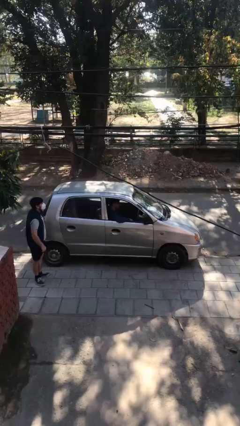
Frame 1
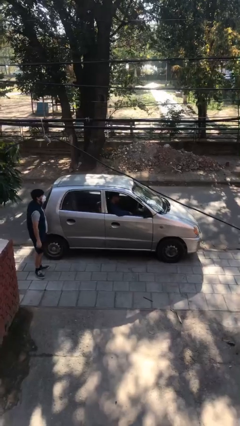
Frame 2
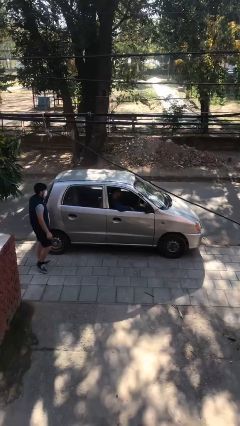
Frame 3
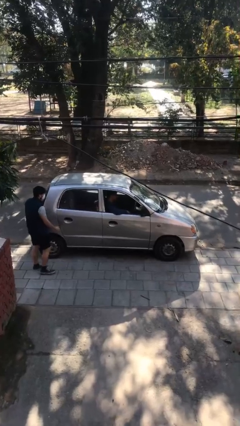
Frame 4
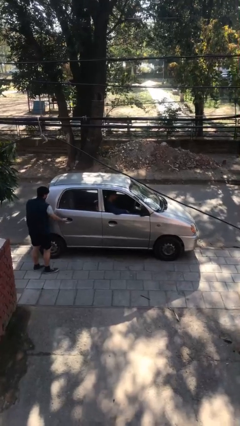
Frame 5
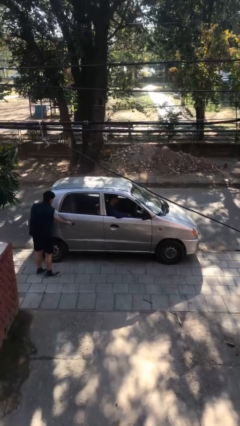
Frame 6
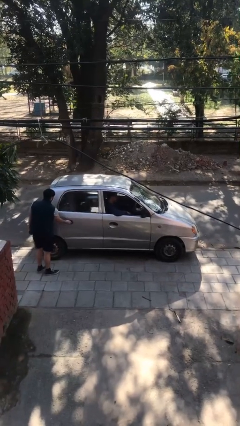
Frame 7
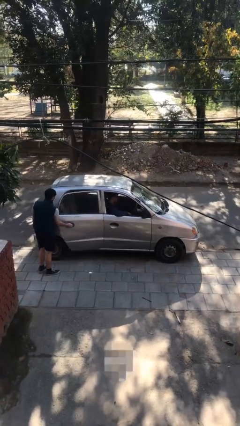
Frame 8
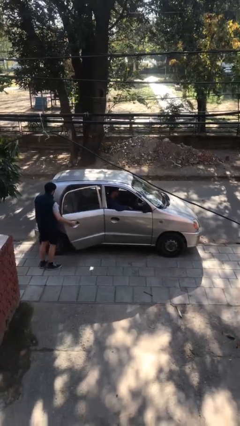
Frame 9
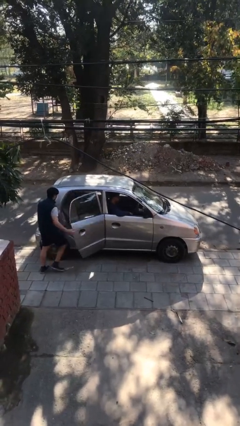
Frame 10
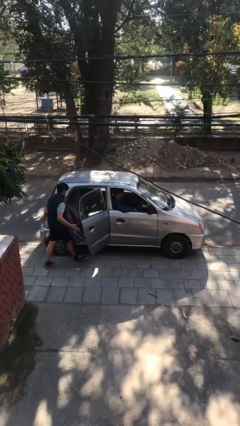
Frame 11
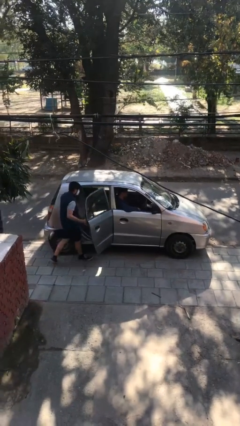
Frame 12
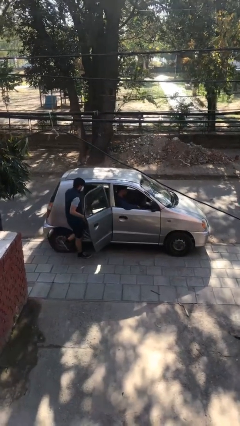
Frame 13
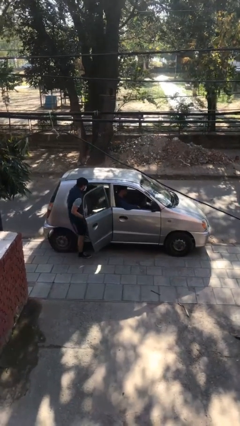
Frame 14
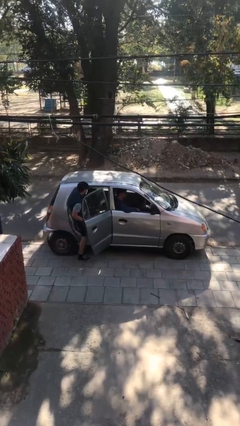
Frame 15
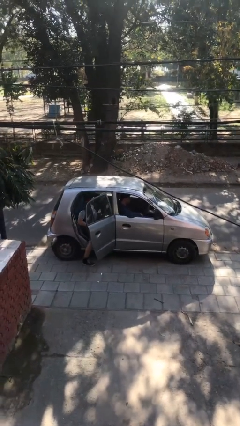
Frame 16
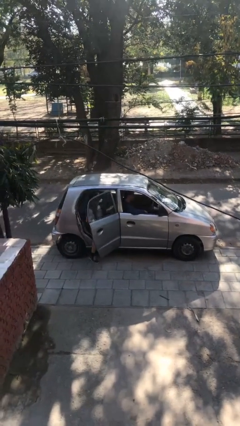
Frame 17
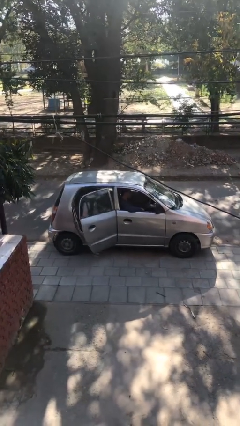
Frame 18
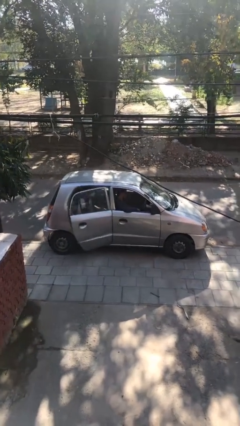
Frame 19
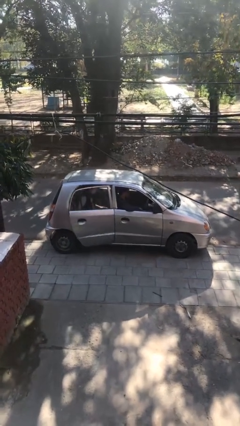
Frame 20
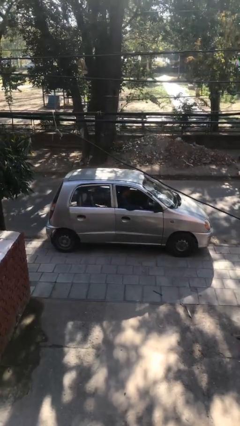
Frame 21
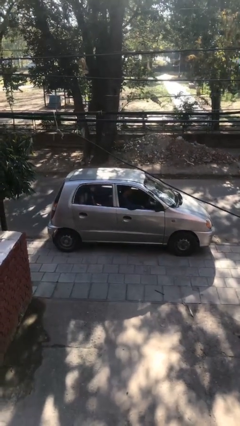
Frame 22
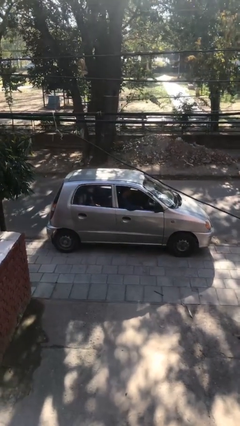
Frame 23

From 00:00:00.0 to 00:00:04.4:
car picks up person

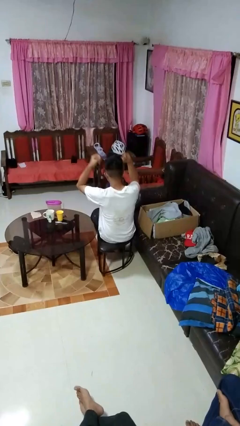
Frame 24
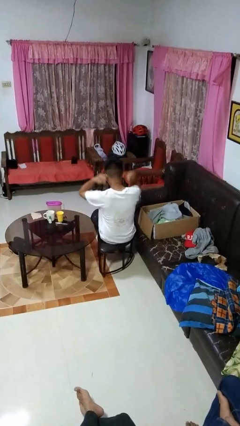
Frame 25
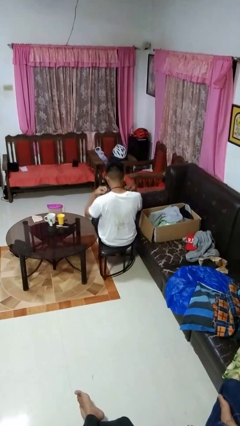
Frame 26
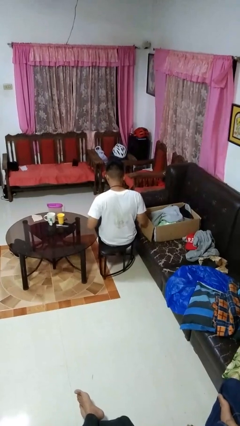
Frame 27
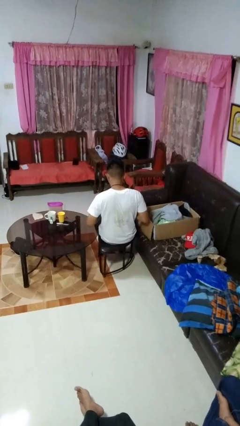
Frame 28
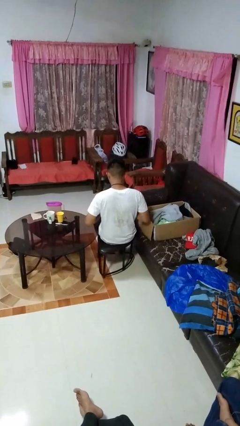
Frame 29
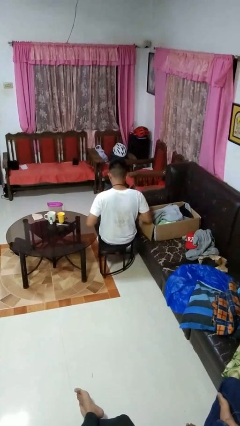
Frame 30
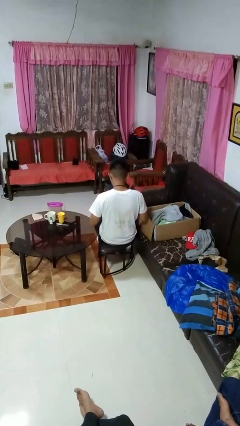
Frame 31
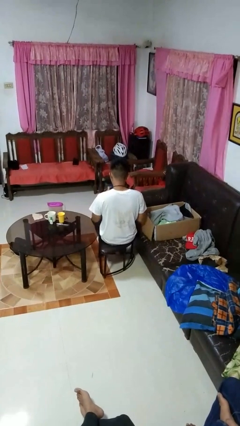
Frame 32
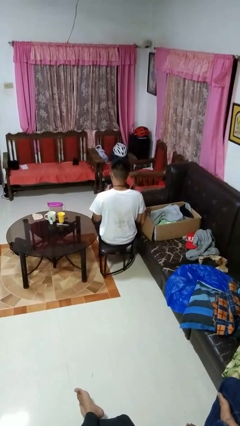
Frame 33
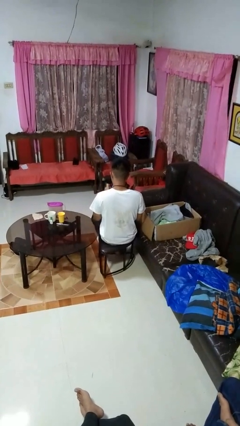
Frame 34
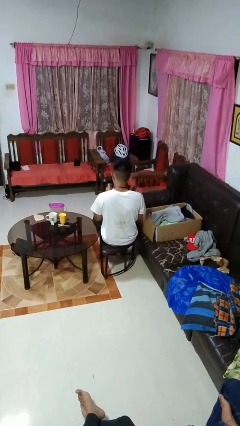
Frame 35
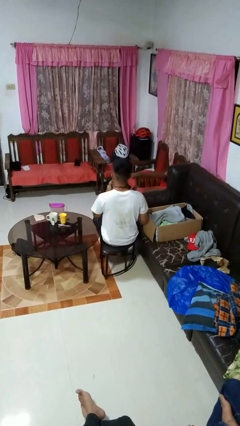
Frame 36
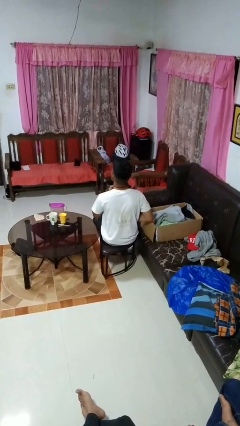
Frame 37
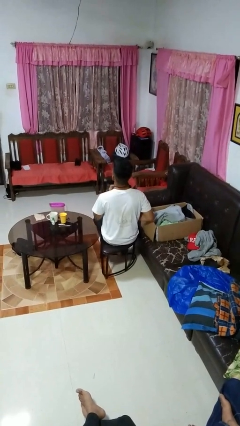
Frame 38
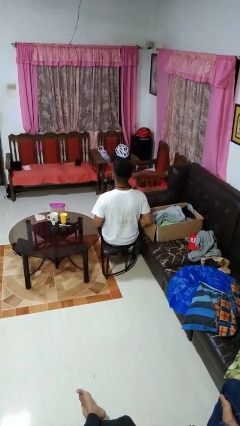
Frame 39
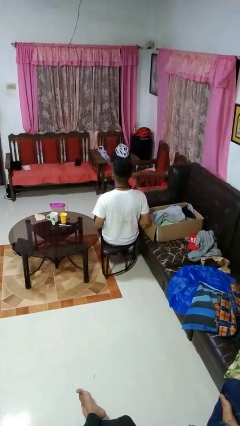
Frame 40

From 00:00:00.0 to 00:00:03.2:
person puts on necktie

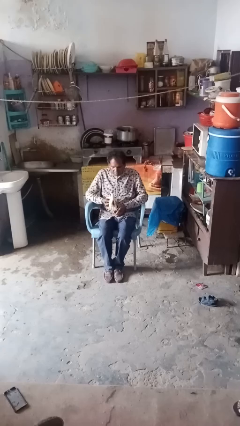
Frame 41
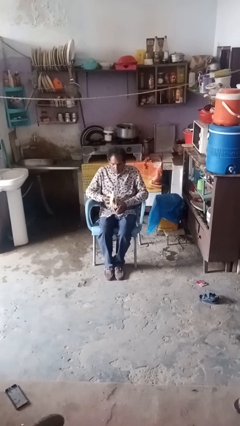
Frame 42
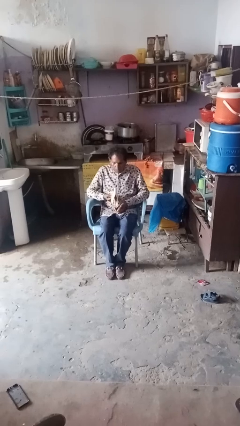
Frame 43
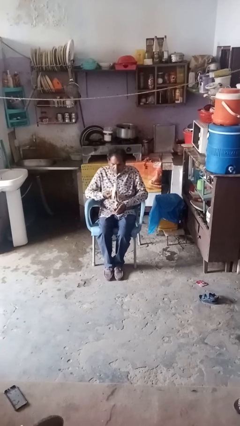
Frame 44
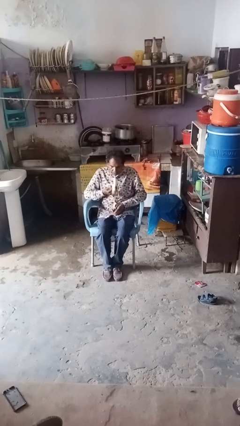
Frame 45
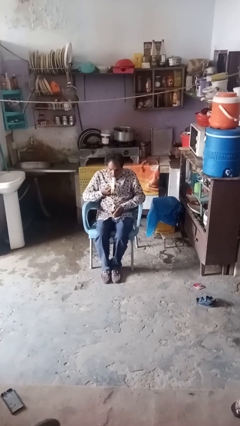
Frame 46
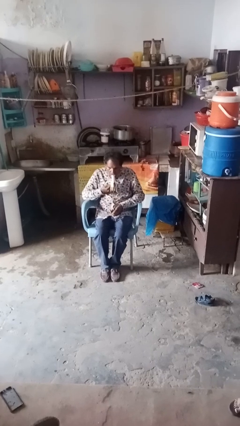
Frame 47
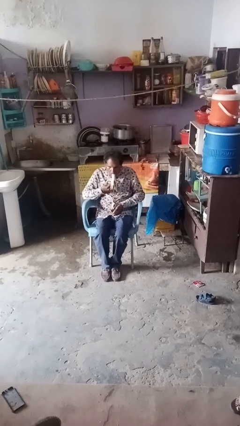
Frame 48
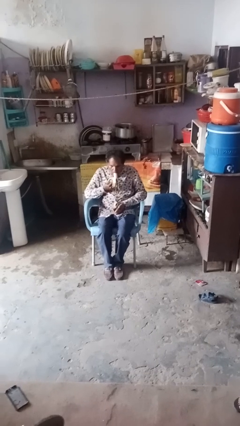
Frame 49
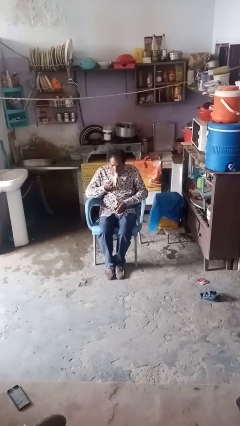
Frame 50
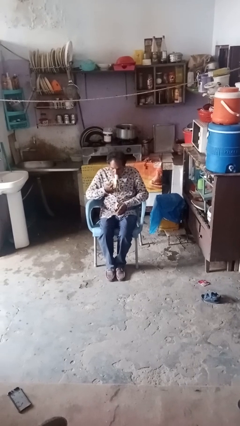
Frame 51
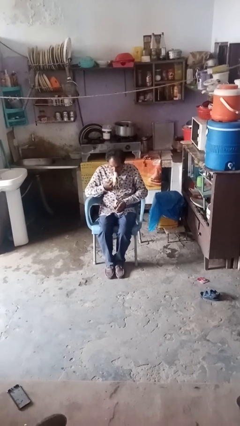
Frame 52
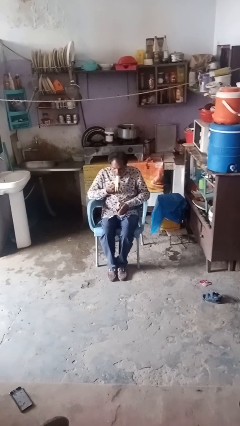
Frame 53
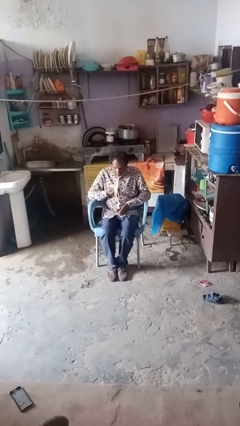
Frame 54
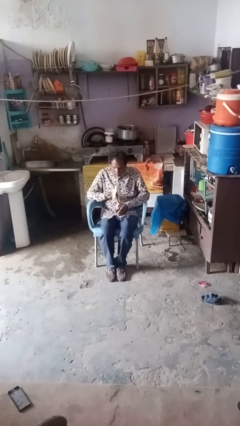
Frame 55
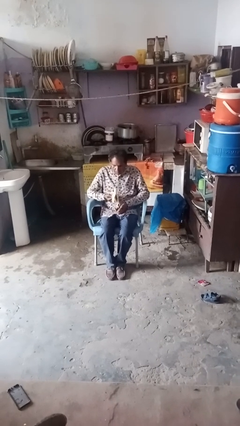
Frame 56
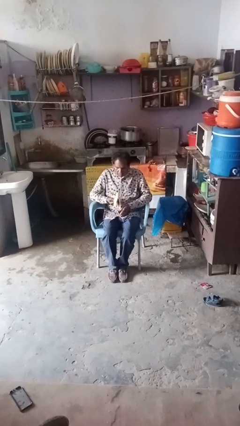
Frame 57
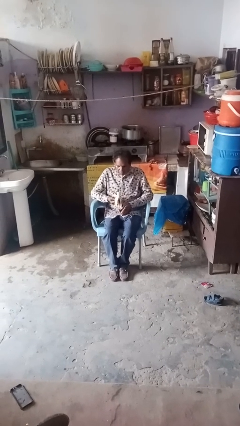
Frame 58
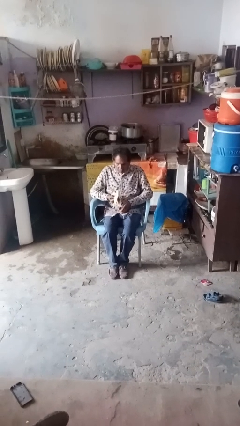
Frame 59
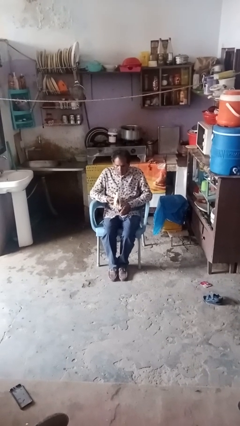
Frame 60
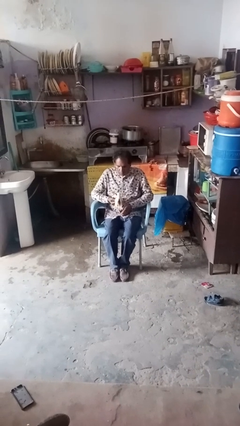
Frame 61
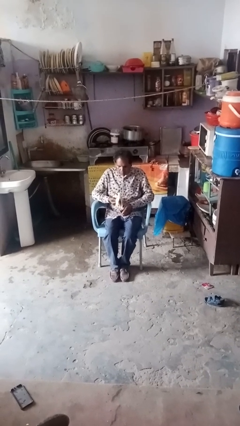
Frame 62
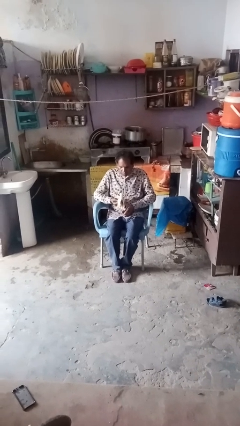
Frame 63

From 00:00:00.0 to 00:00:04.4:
person eats banana

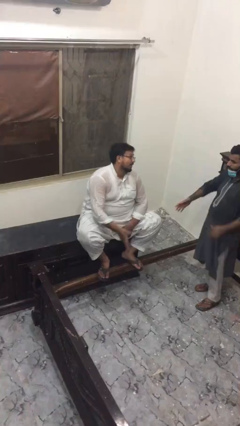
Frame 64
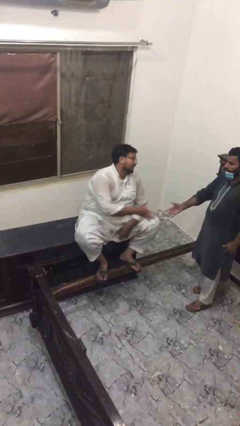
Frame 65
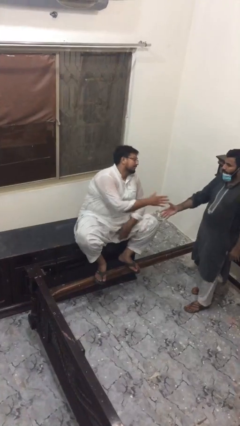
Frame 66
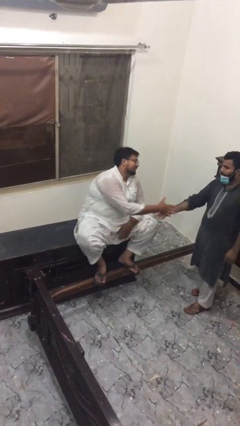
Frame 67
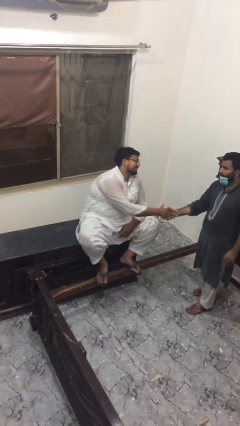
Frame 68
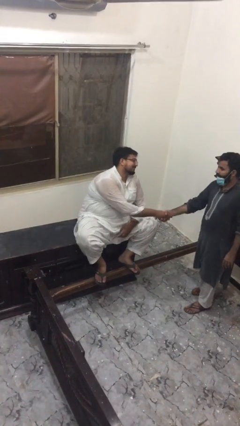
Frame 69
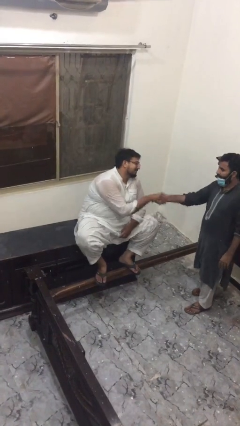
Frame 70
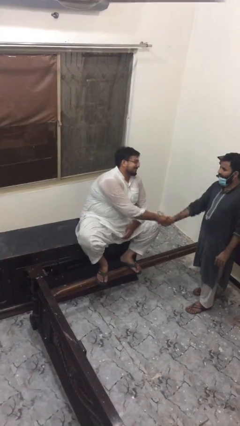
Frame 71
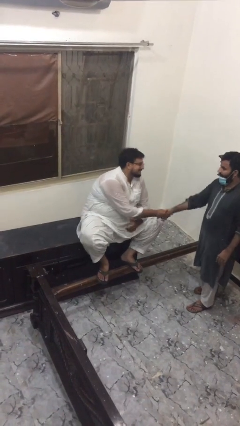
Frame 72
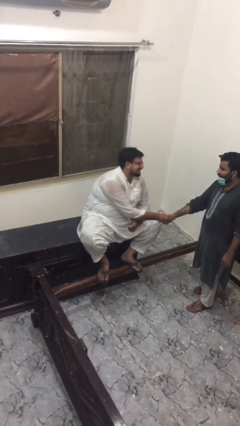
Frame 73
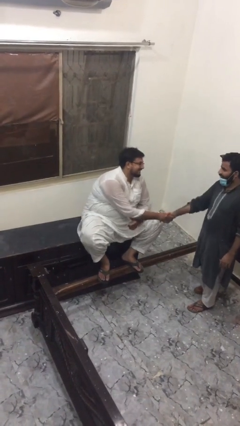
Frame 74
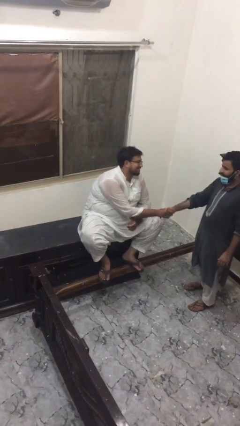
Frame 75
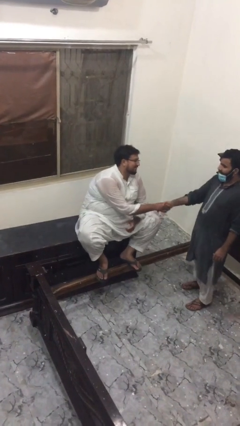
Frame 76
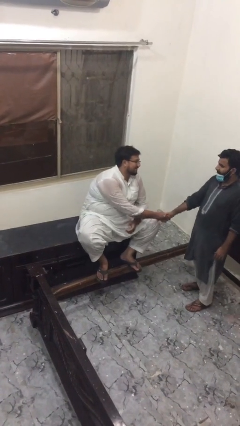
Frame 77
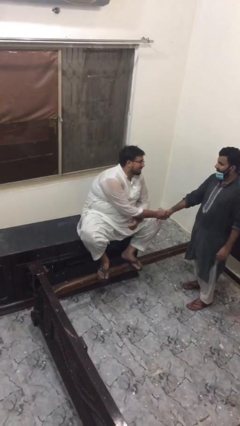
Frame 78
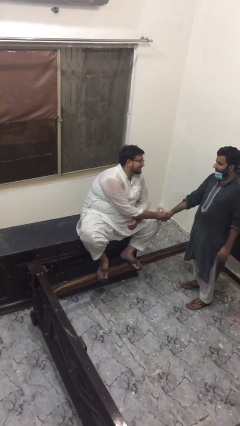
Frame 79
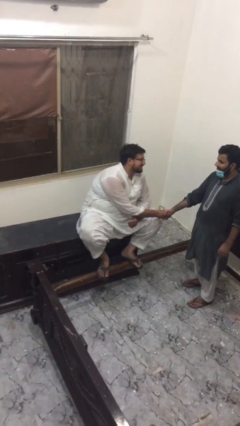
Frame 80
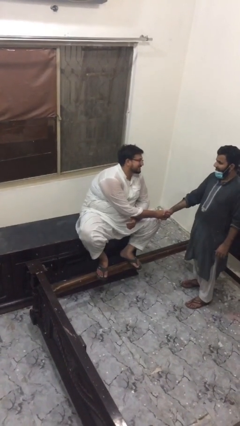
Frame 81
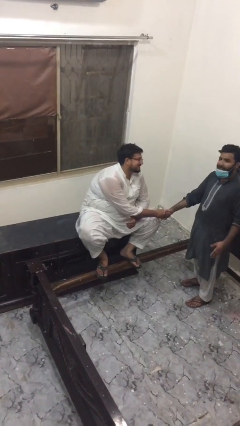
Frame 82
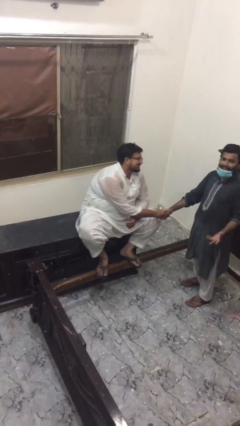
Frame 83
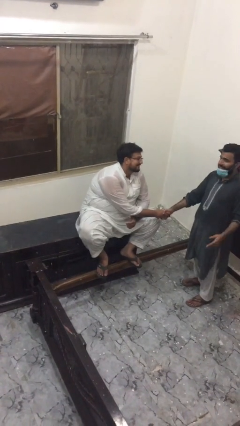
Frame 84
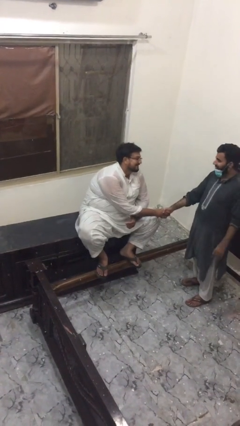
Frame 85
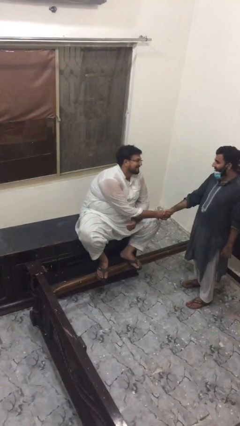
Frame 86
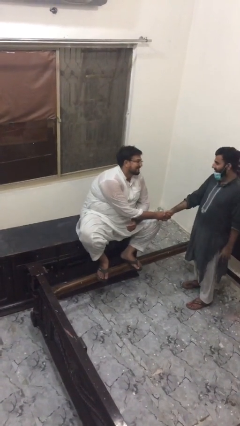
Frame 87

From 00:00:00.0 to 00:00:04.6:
person shakes hand

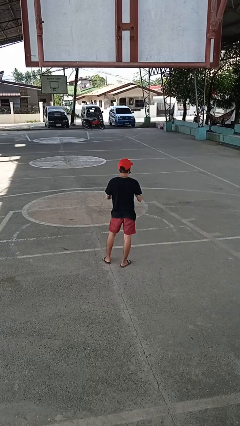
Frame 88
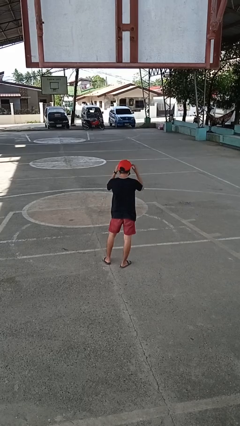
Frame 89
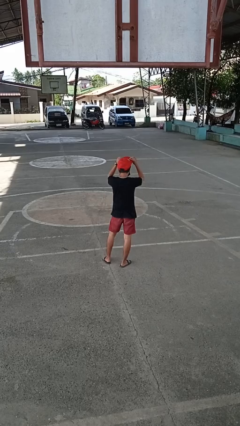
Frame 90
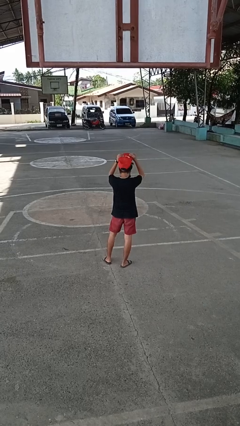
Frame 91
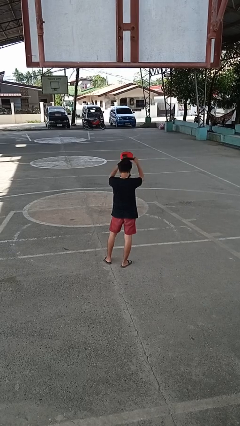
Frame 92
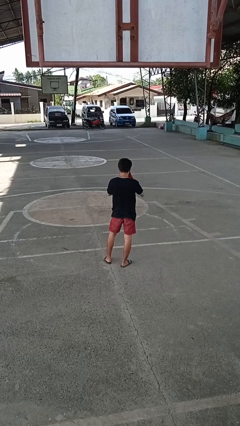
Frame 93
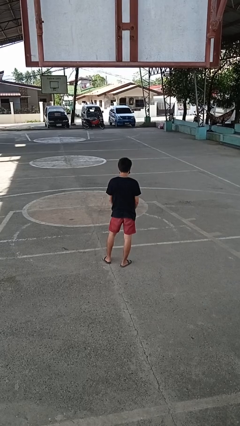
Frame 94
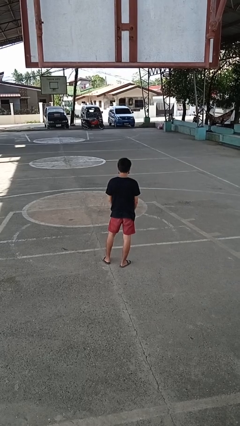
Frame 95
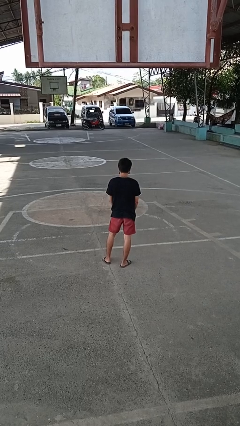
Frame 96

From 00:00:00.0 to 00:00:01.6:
person takes off hat
